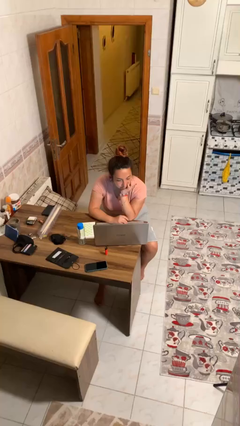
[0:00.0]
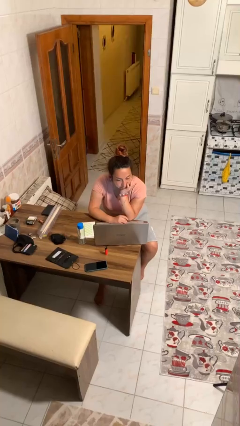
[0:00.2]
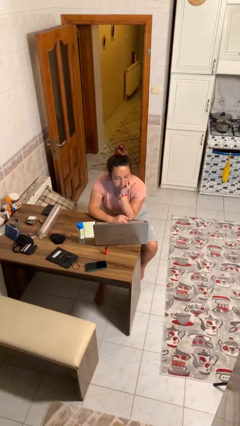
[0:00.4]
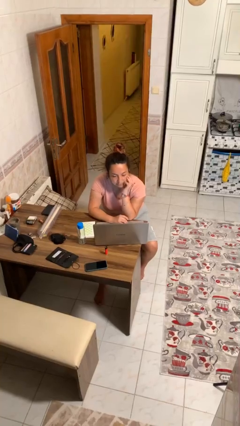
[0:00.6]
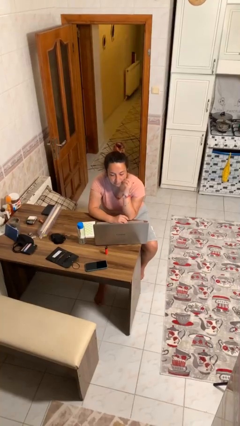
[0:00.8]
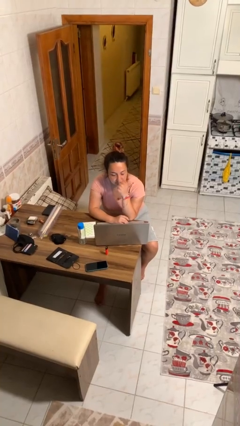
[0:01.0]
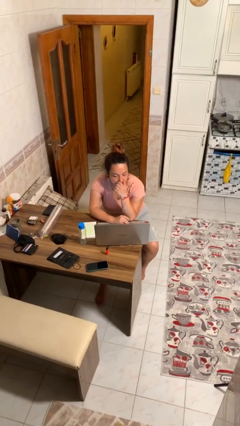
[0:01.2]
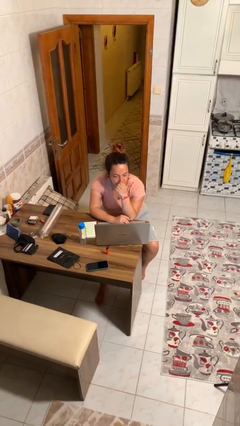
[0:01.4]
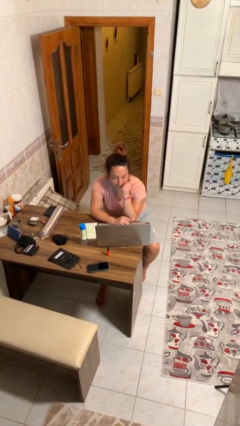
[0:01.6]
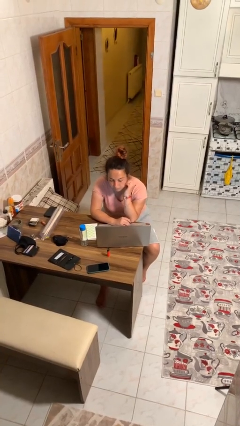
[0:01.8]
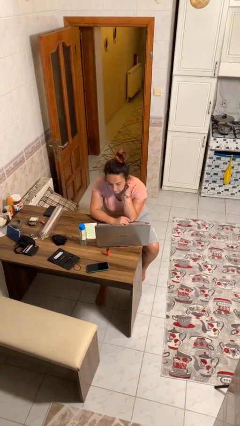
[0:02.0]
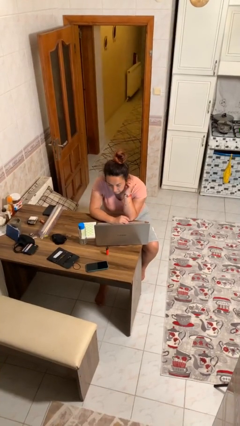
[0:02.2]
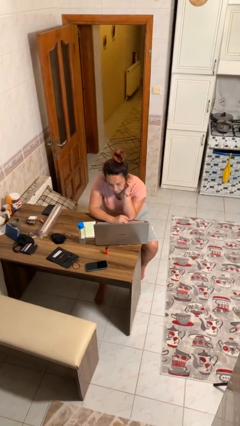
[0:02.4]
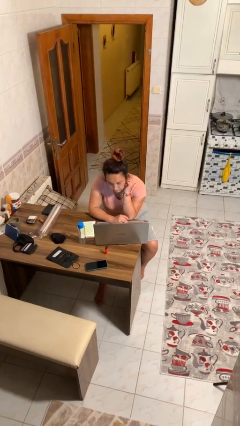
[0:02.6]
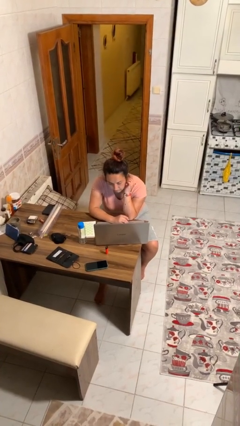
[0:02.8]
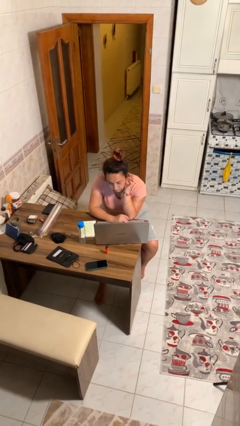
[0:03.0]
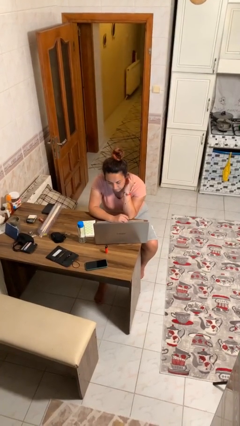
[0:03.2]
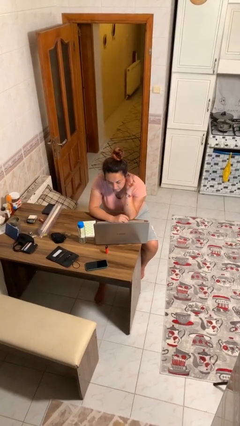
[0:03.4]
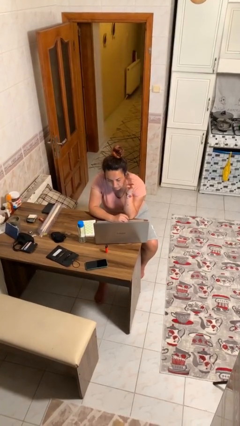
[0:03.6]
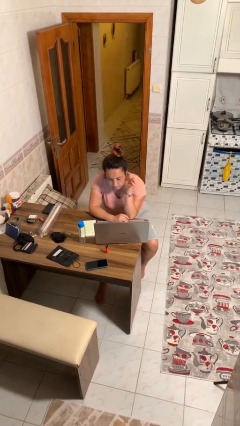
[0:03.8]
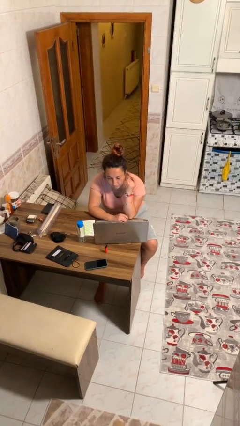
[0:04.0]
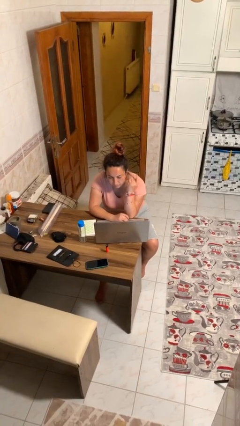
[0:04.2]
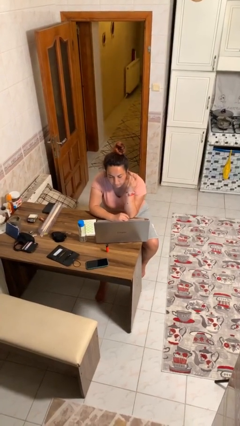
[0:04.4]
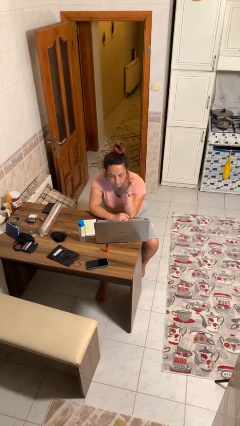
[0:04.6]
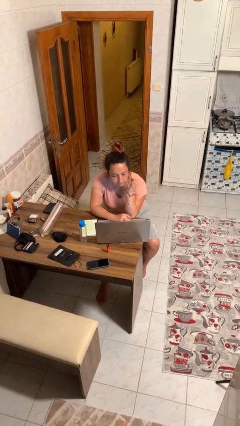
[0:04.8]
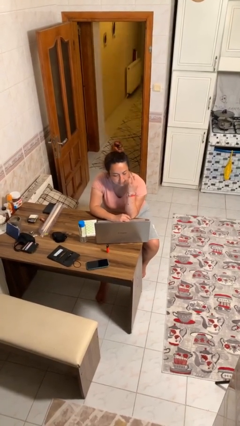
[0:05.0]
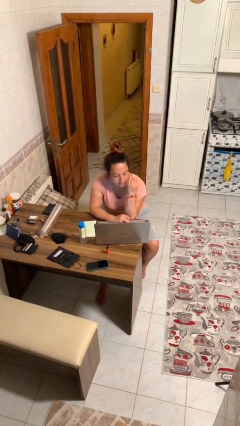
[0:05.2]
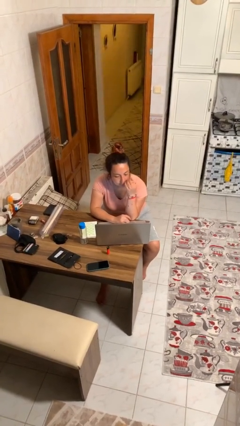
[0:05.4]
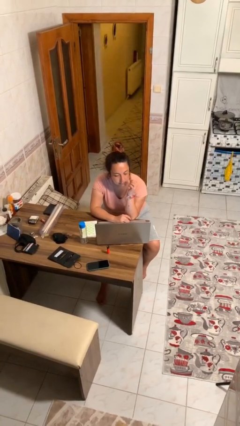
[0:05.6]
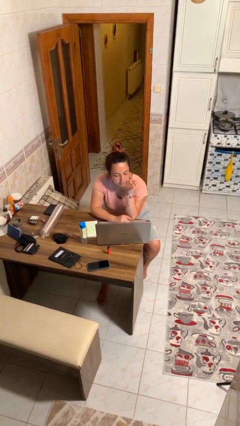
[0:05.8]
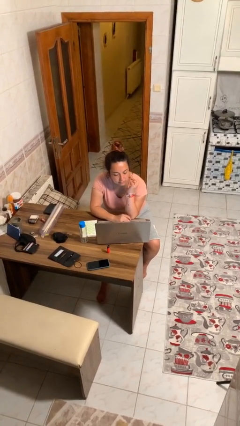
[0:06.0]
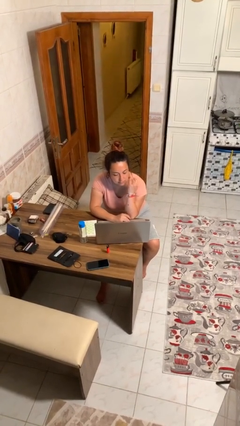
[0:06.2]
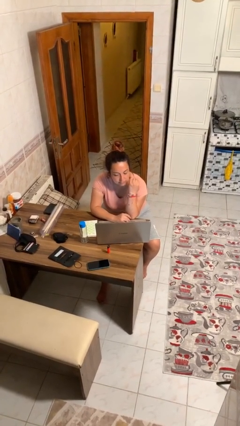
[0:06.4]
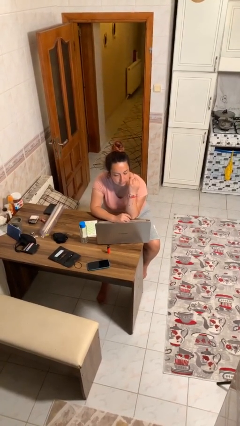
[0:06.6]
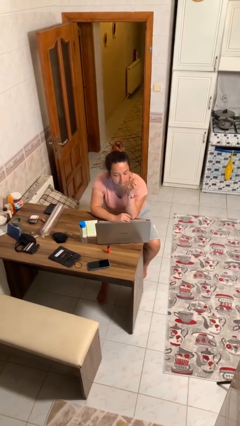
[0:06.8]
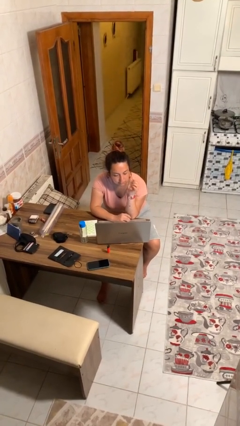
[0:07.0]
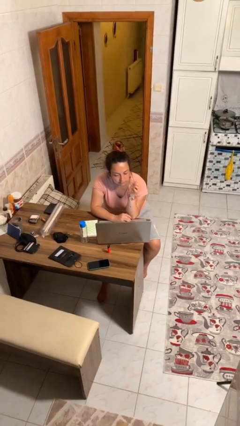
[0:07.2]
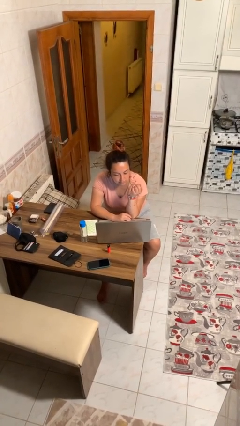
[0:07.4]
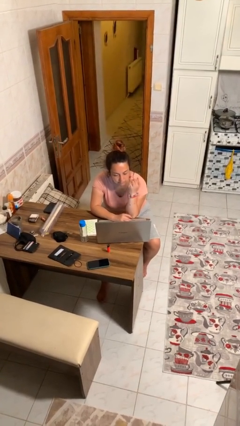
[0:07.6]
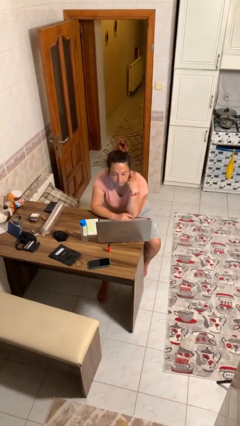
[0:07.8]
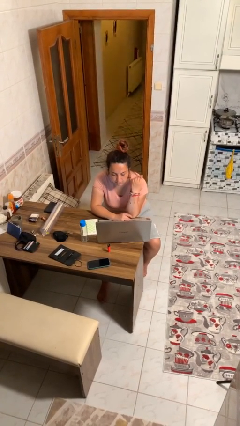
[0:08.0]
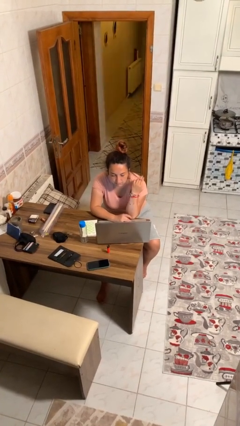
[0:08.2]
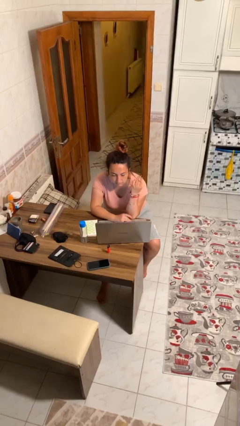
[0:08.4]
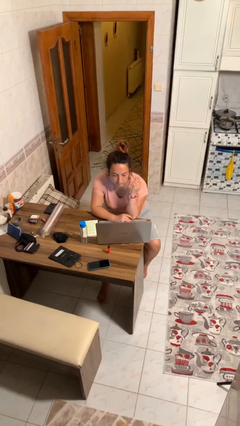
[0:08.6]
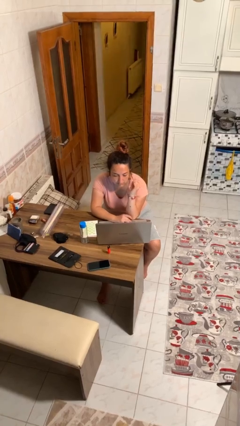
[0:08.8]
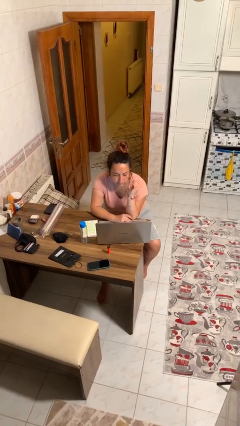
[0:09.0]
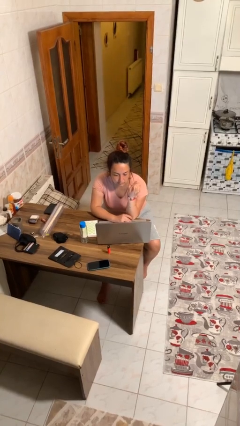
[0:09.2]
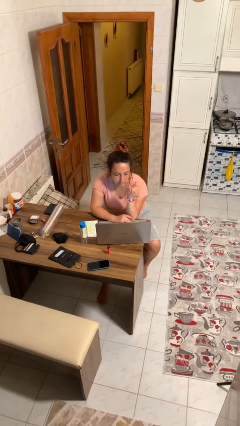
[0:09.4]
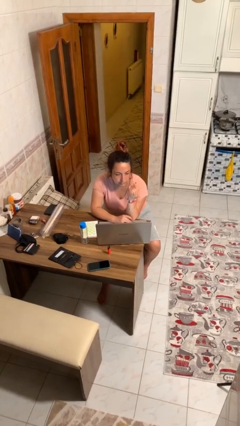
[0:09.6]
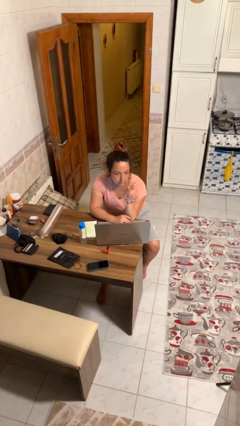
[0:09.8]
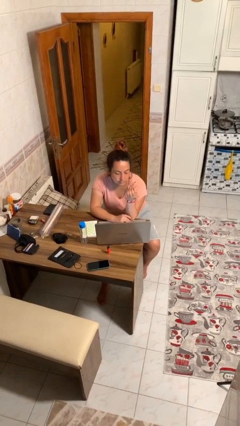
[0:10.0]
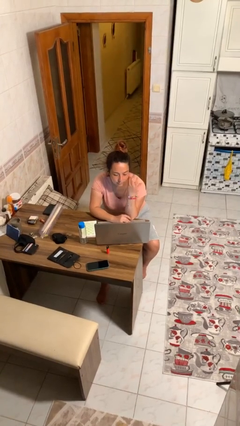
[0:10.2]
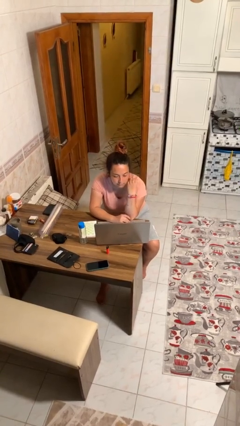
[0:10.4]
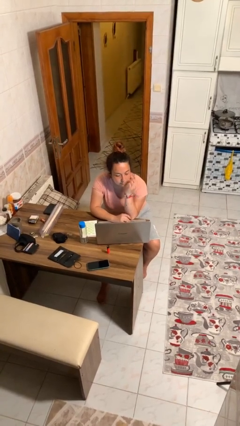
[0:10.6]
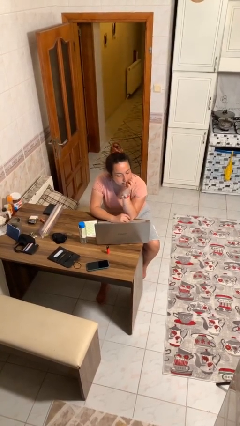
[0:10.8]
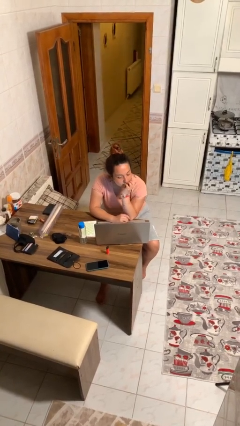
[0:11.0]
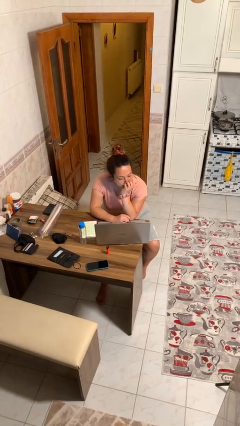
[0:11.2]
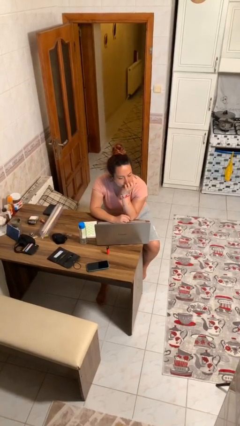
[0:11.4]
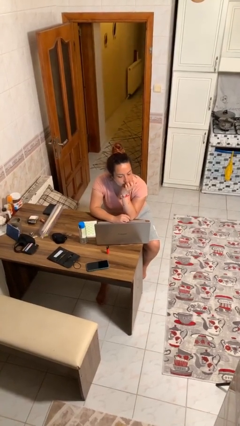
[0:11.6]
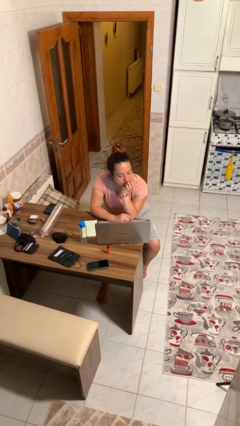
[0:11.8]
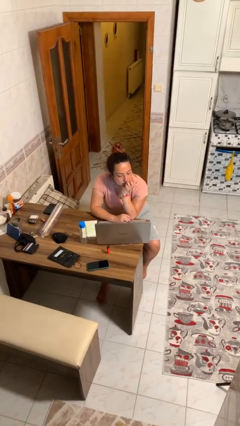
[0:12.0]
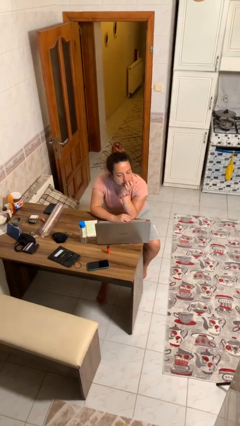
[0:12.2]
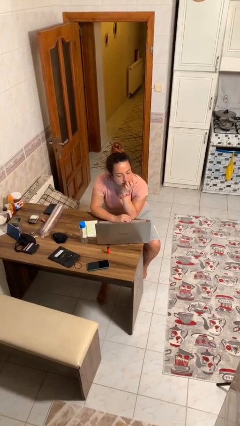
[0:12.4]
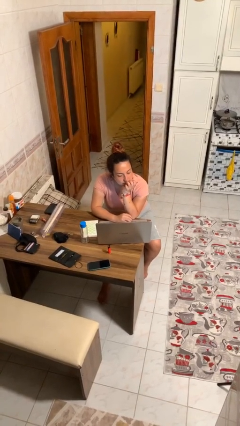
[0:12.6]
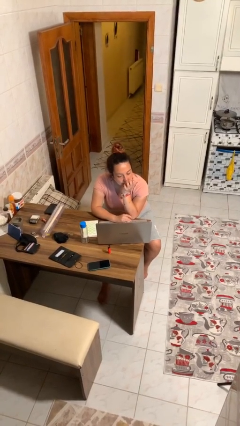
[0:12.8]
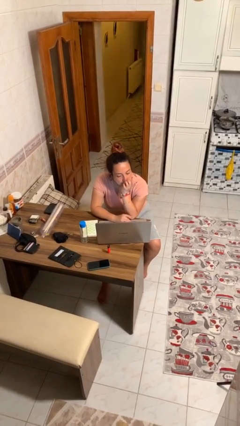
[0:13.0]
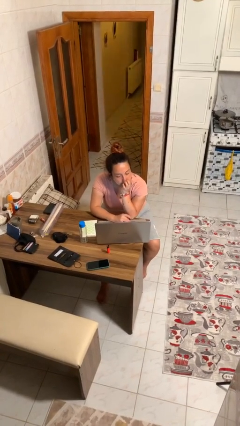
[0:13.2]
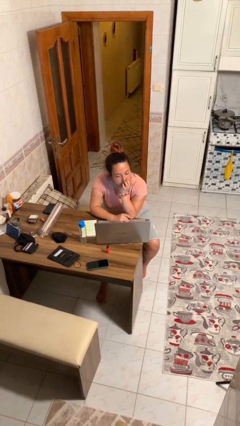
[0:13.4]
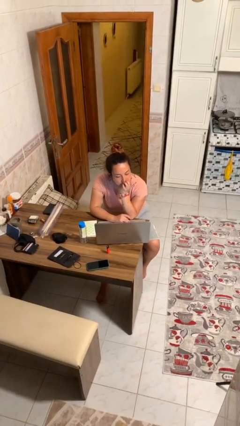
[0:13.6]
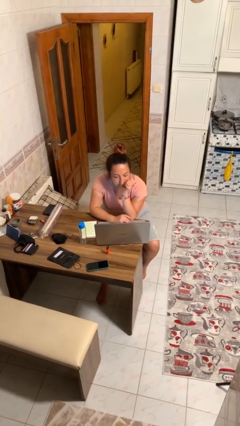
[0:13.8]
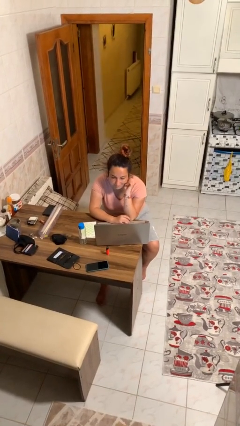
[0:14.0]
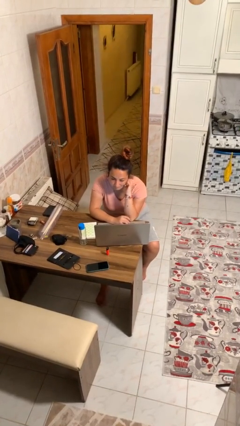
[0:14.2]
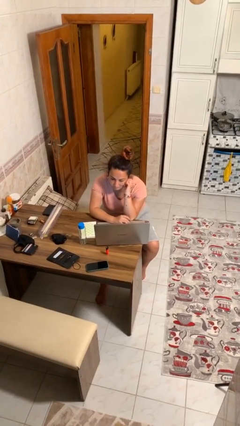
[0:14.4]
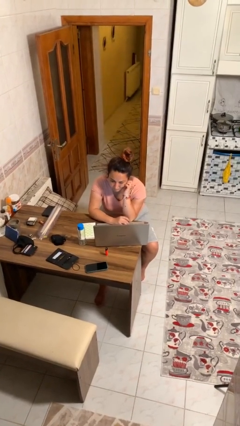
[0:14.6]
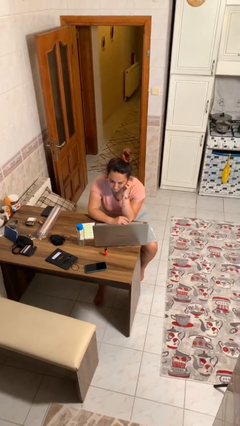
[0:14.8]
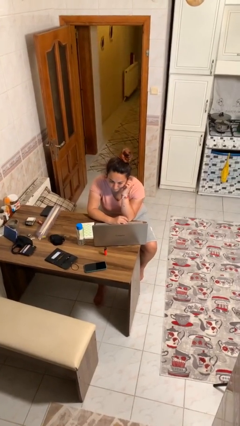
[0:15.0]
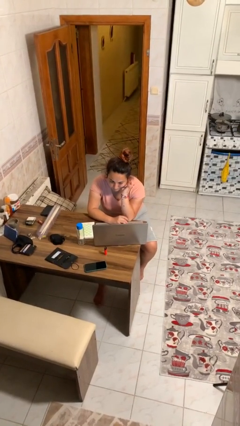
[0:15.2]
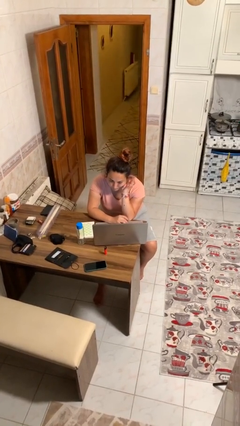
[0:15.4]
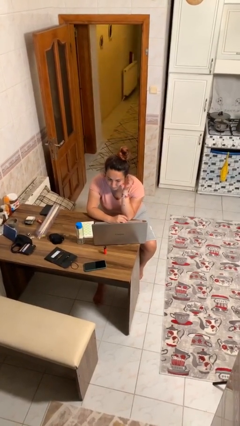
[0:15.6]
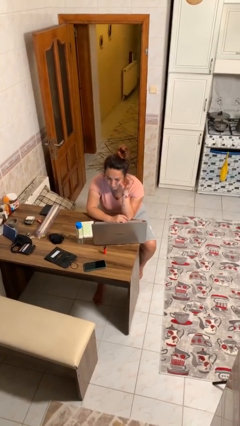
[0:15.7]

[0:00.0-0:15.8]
person interacts with laptop

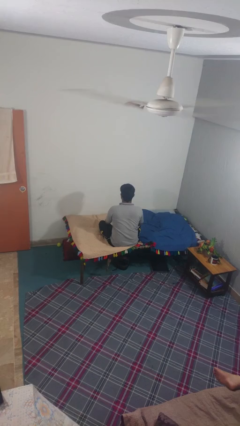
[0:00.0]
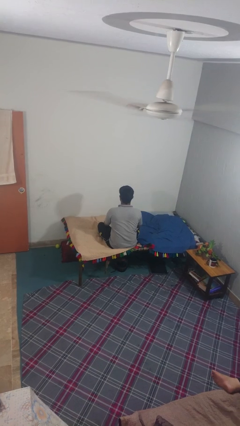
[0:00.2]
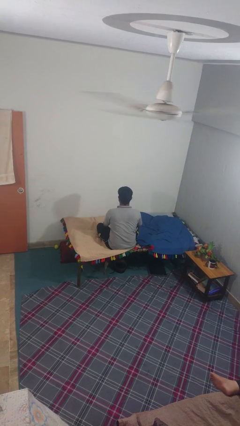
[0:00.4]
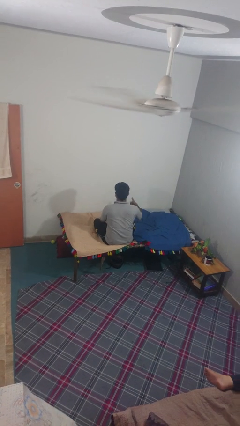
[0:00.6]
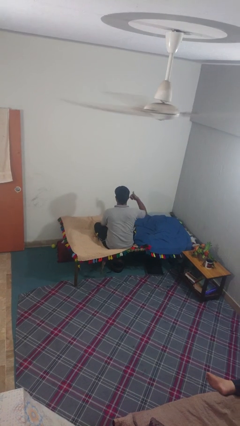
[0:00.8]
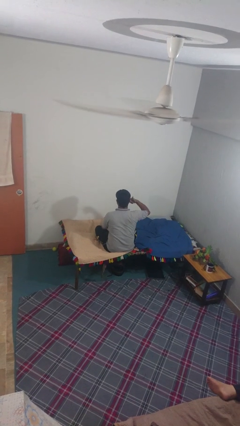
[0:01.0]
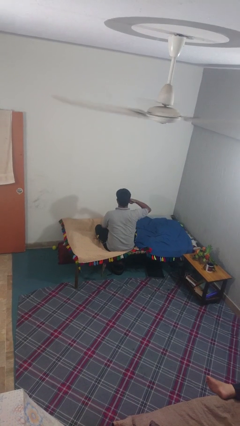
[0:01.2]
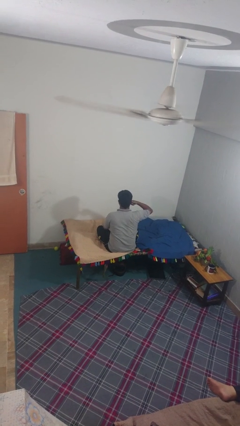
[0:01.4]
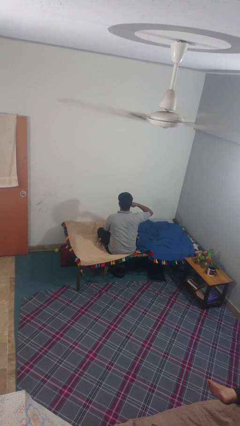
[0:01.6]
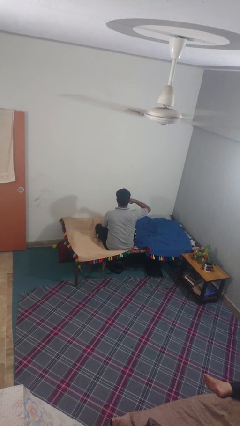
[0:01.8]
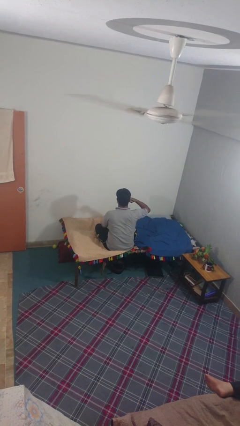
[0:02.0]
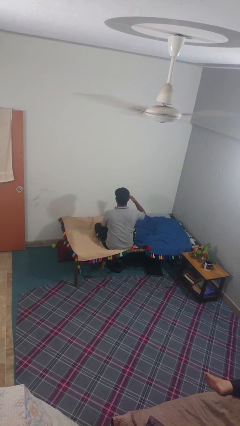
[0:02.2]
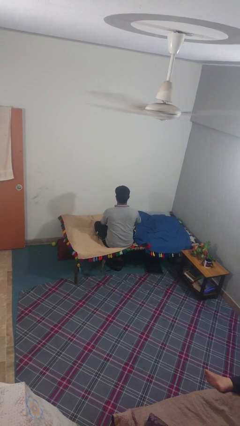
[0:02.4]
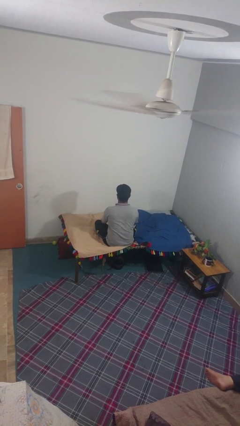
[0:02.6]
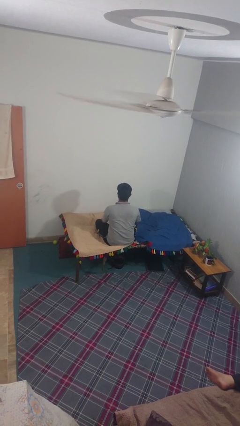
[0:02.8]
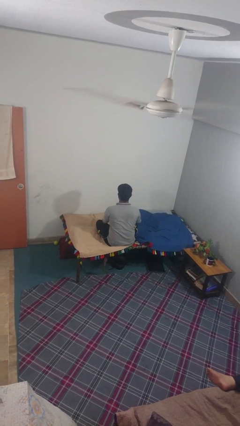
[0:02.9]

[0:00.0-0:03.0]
person gestures call me
